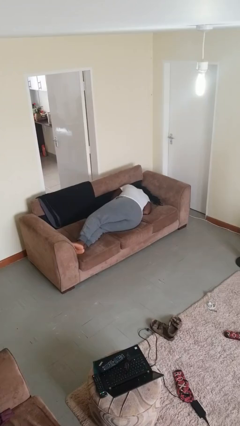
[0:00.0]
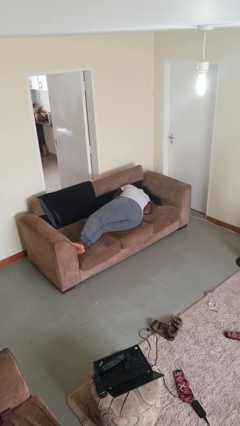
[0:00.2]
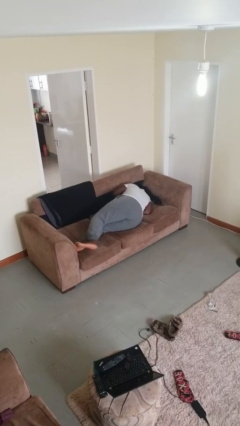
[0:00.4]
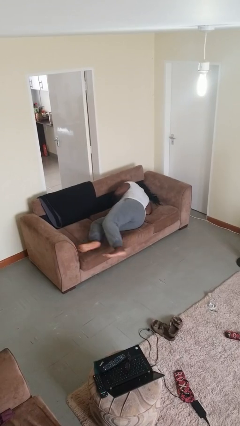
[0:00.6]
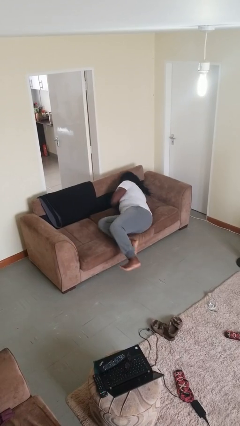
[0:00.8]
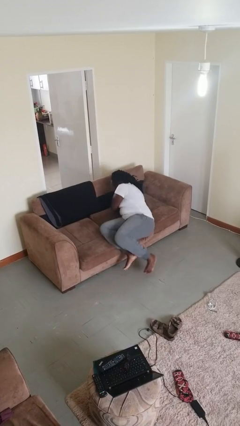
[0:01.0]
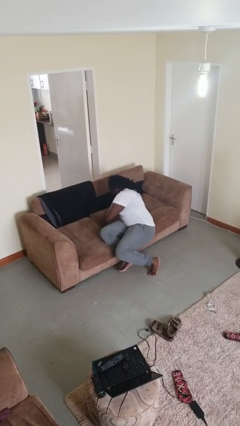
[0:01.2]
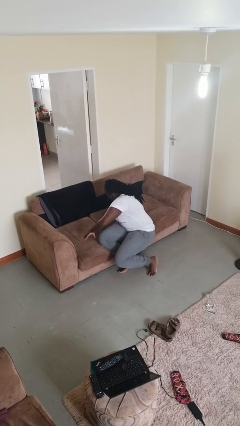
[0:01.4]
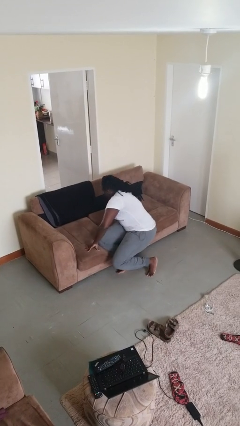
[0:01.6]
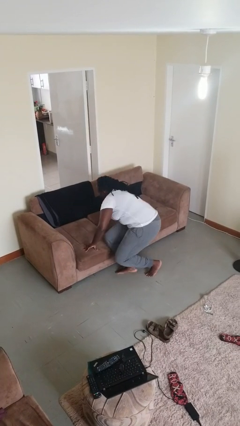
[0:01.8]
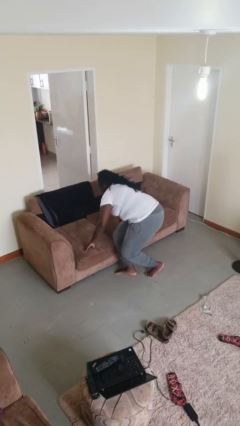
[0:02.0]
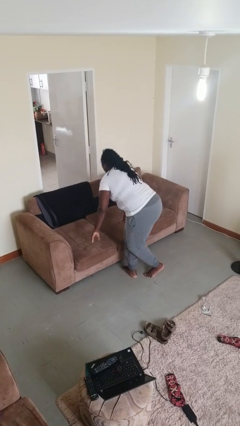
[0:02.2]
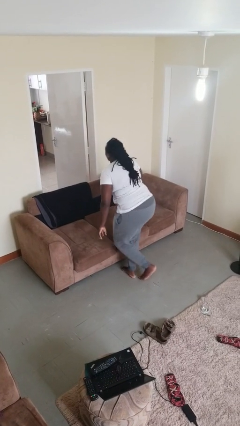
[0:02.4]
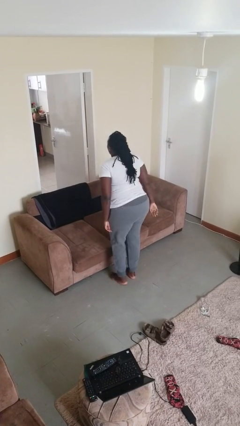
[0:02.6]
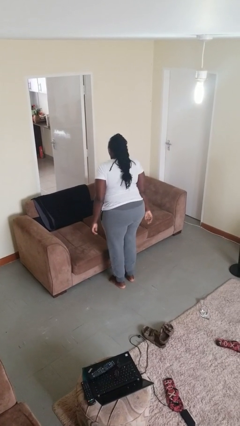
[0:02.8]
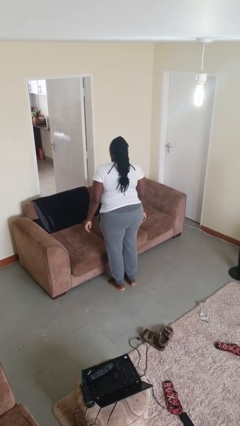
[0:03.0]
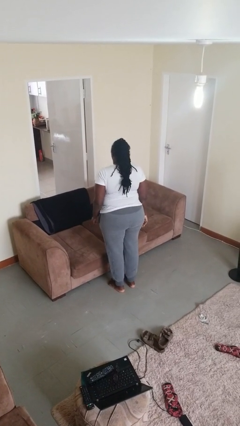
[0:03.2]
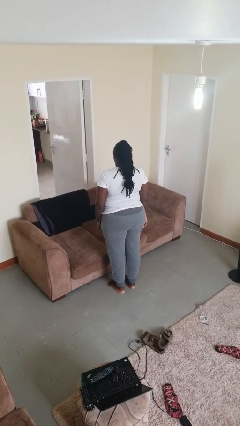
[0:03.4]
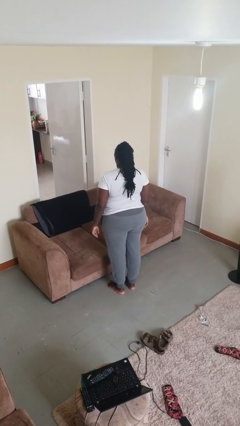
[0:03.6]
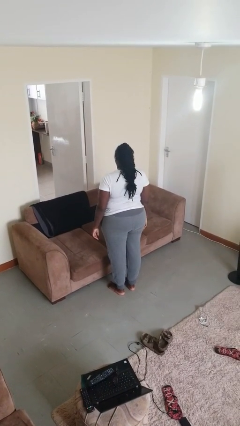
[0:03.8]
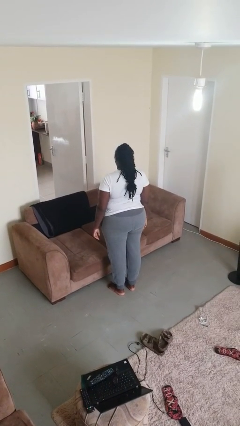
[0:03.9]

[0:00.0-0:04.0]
person stands up

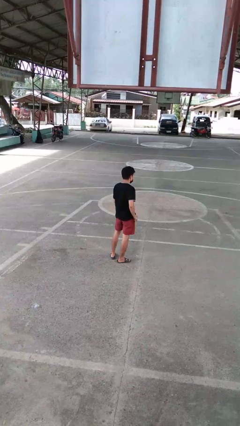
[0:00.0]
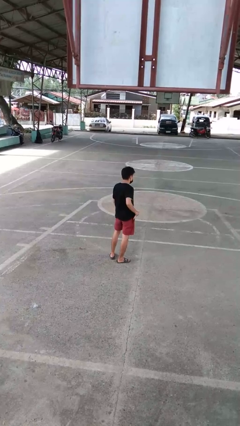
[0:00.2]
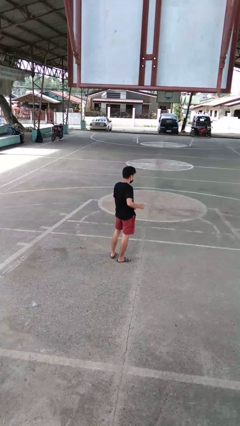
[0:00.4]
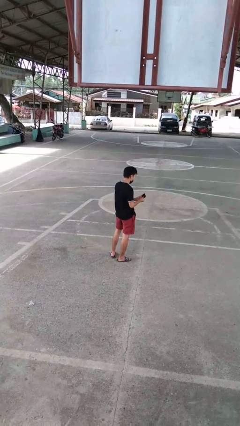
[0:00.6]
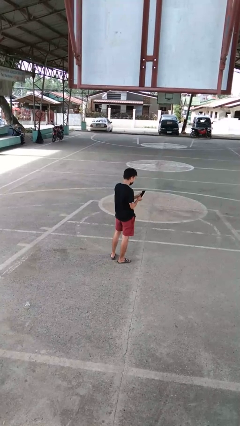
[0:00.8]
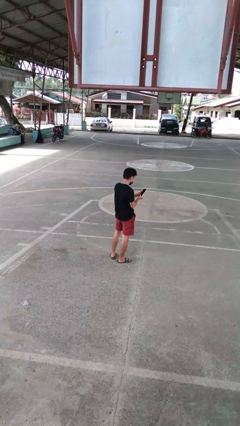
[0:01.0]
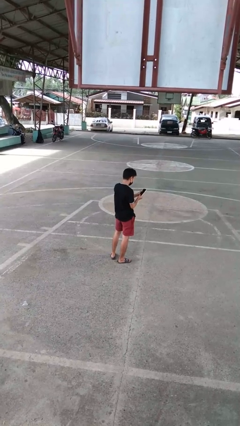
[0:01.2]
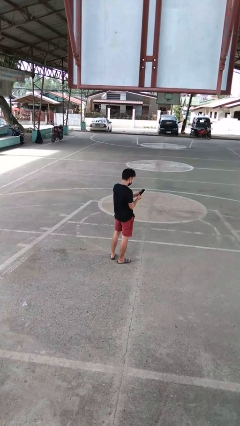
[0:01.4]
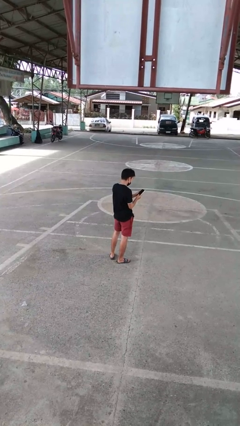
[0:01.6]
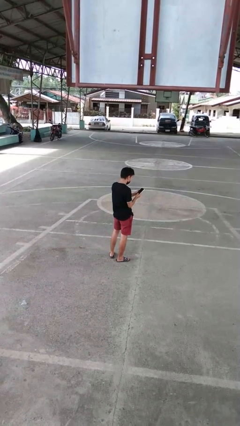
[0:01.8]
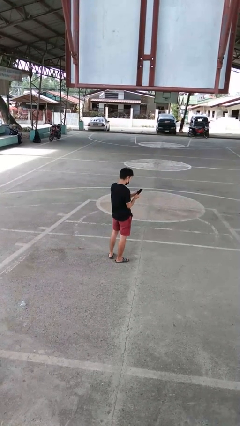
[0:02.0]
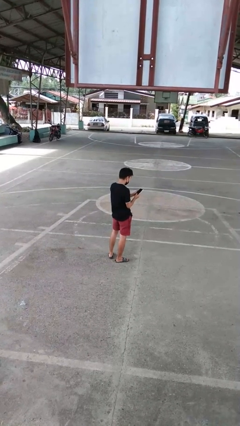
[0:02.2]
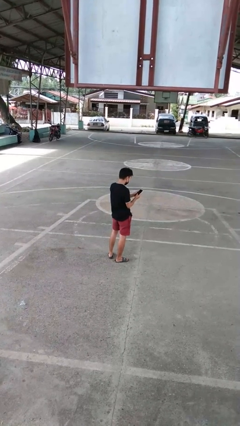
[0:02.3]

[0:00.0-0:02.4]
person takes phone from pocket

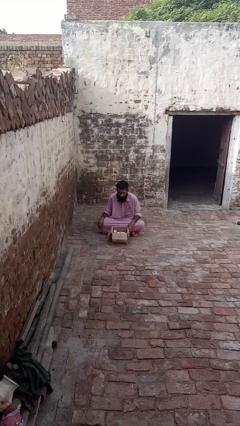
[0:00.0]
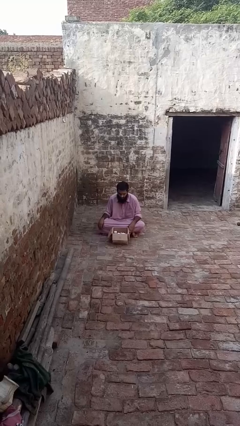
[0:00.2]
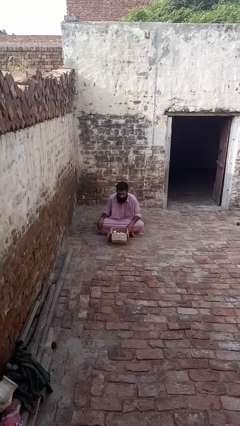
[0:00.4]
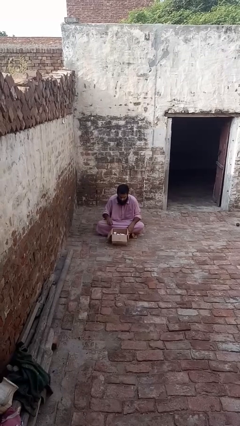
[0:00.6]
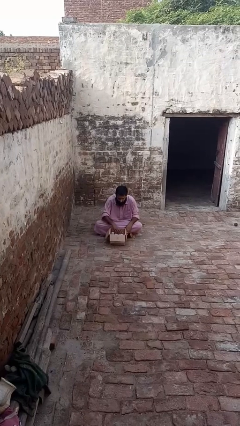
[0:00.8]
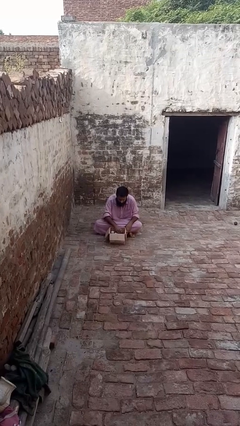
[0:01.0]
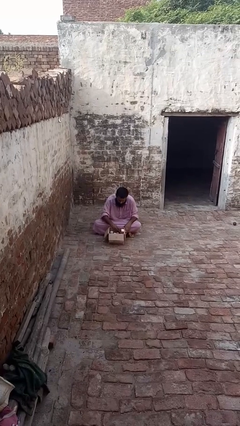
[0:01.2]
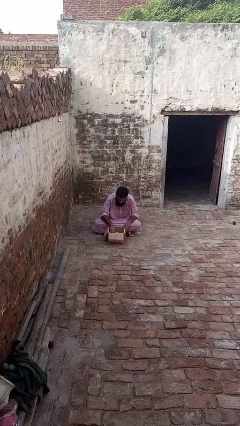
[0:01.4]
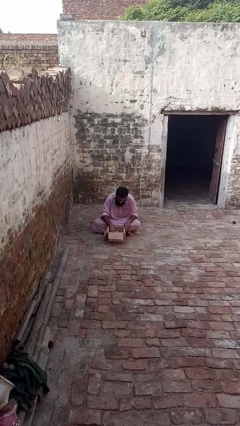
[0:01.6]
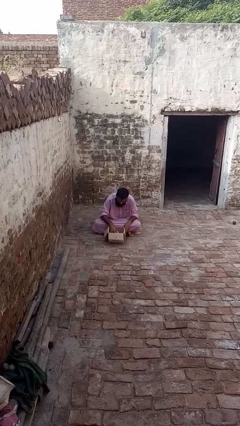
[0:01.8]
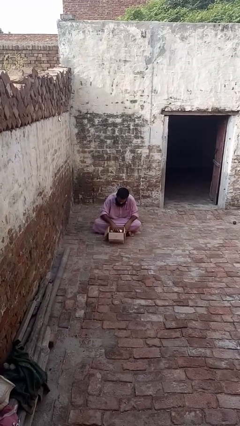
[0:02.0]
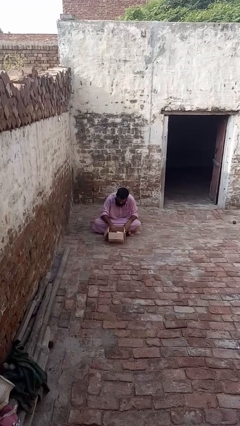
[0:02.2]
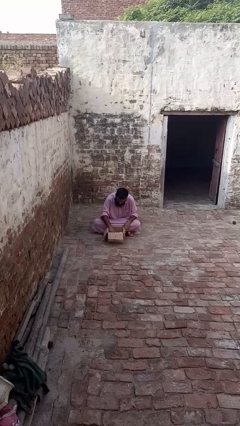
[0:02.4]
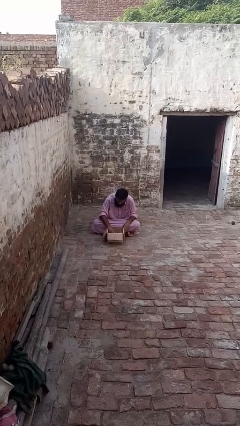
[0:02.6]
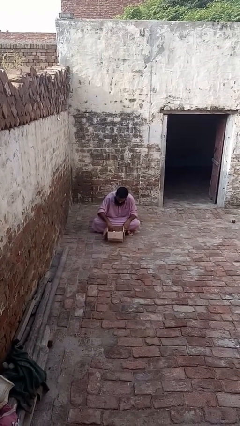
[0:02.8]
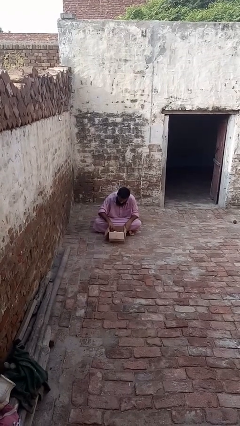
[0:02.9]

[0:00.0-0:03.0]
person searches in box

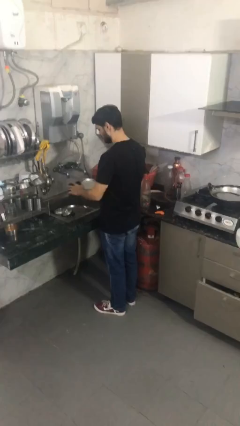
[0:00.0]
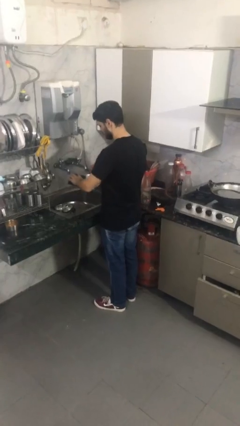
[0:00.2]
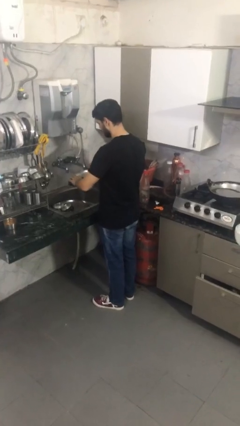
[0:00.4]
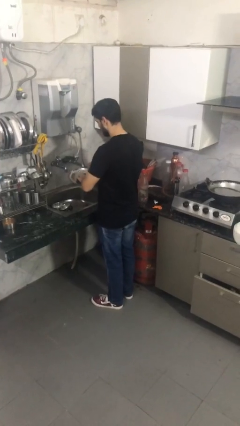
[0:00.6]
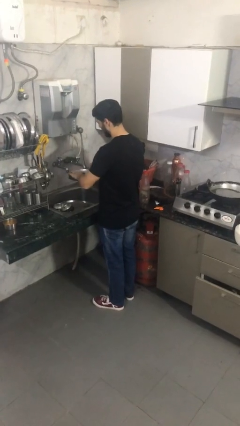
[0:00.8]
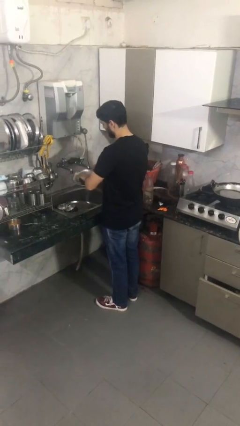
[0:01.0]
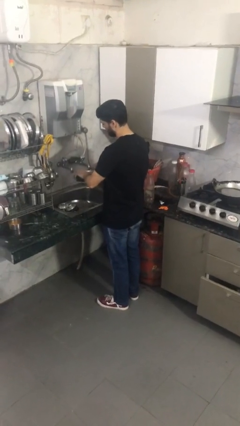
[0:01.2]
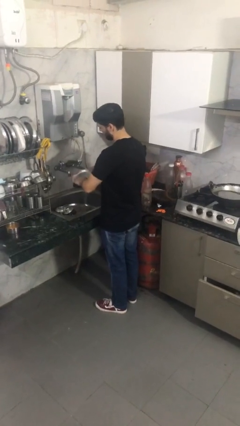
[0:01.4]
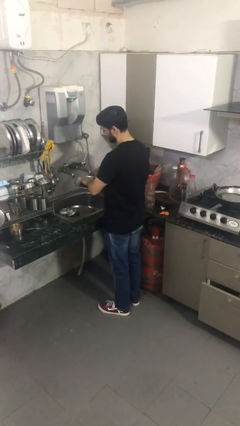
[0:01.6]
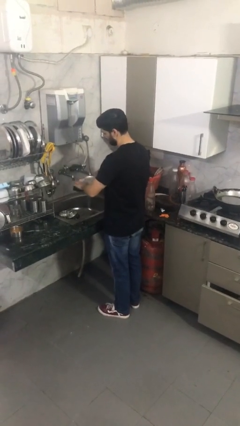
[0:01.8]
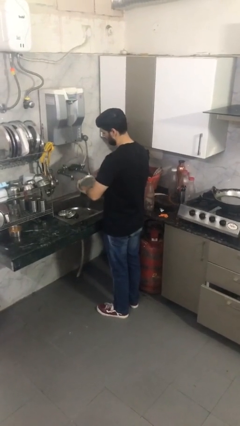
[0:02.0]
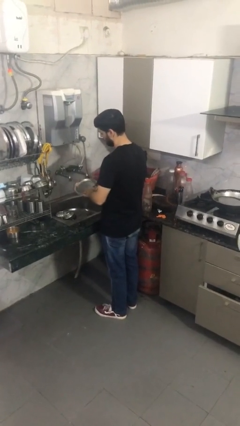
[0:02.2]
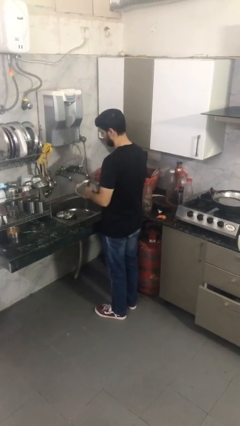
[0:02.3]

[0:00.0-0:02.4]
person washes dish

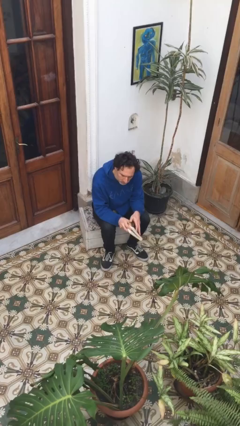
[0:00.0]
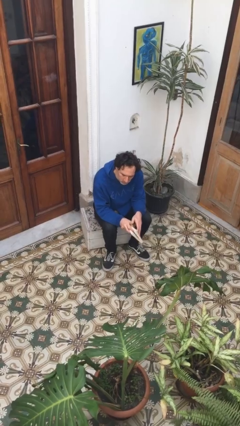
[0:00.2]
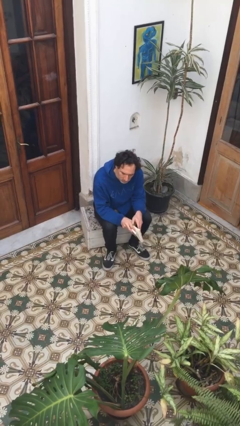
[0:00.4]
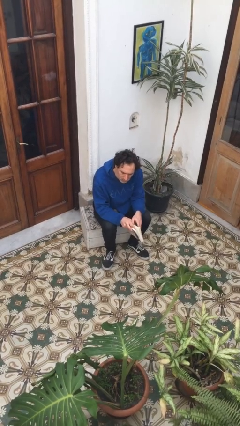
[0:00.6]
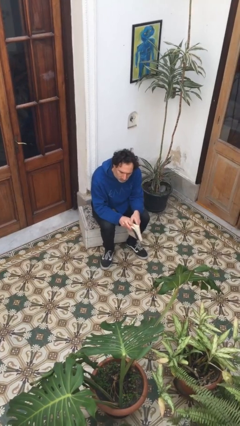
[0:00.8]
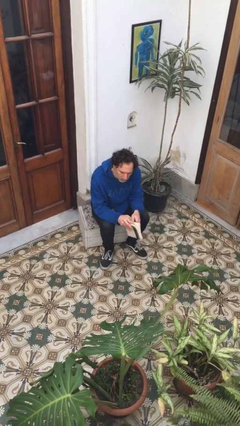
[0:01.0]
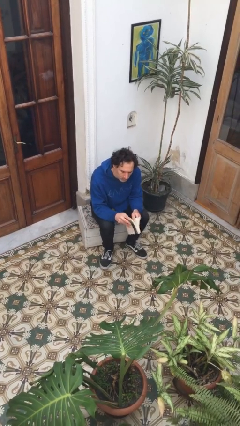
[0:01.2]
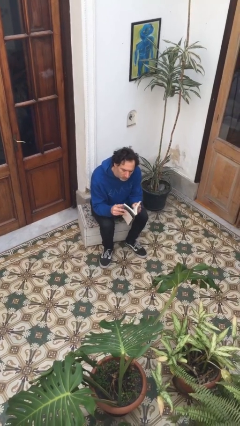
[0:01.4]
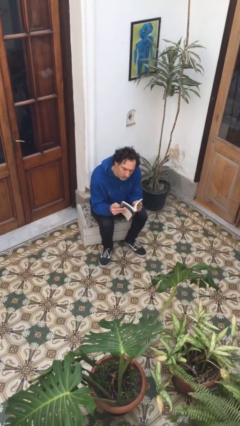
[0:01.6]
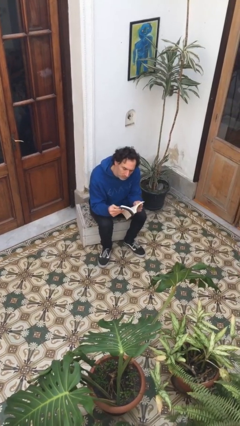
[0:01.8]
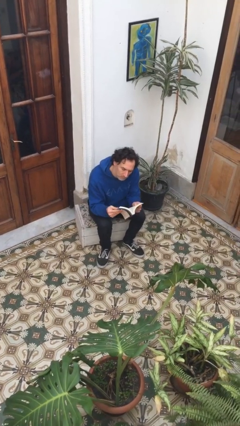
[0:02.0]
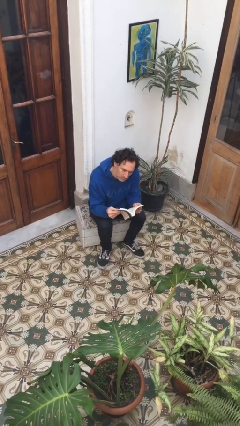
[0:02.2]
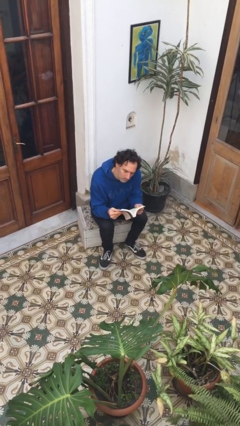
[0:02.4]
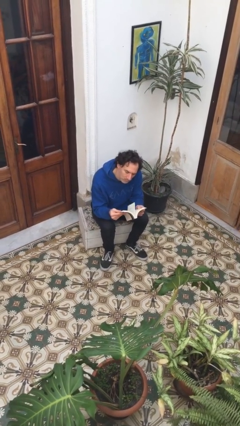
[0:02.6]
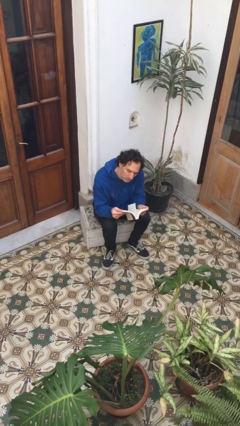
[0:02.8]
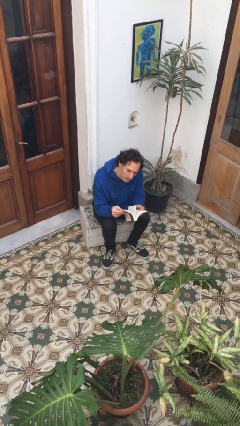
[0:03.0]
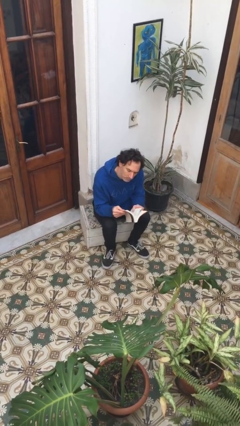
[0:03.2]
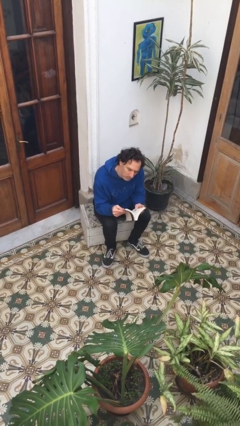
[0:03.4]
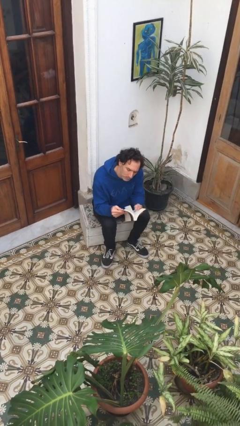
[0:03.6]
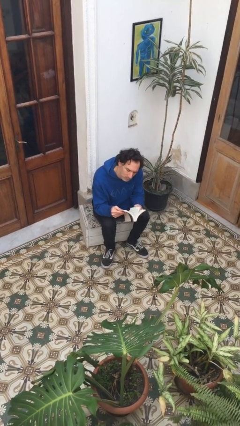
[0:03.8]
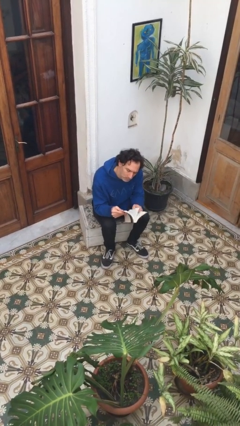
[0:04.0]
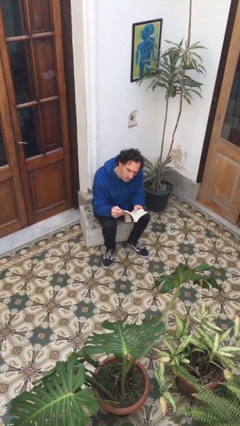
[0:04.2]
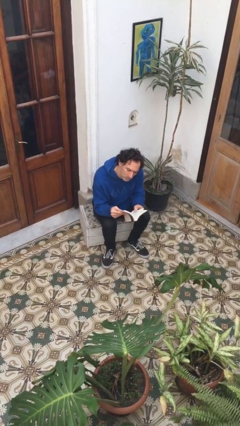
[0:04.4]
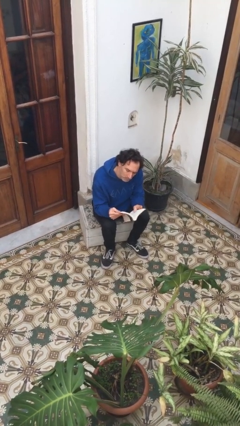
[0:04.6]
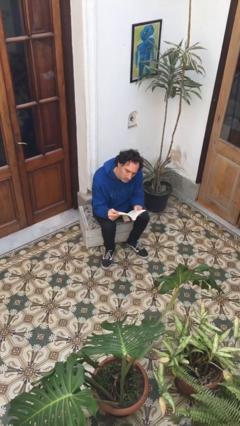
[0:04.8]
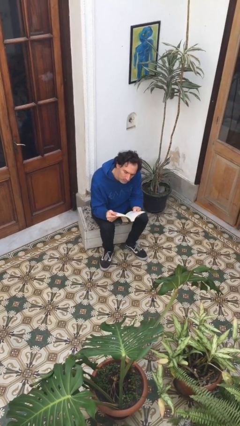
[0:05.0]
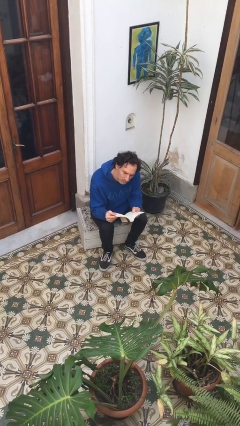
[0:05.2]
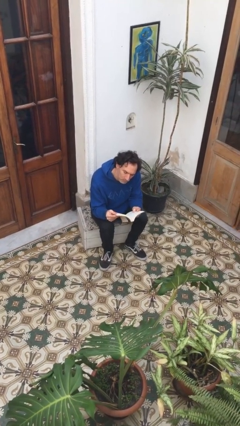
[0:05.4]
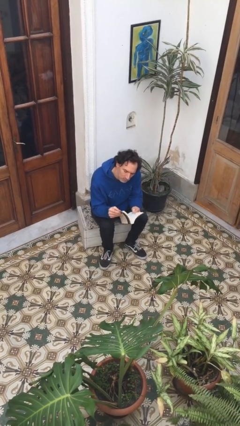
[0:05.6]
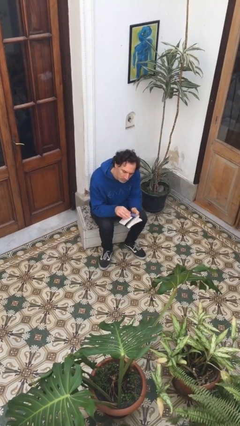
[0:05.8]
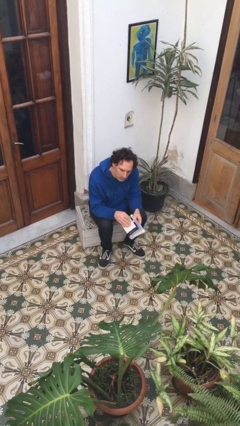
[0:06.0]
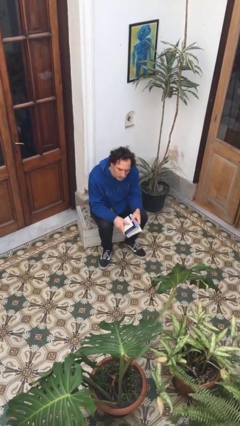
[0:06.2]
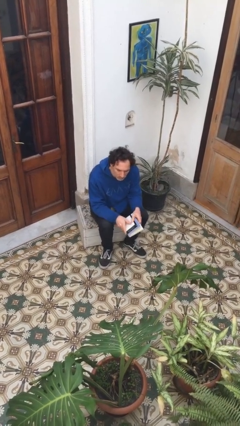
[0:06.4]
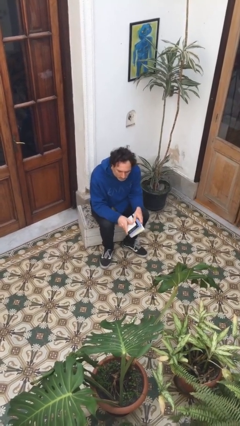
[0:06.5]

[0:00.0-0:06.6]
person reads book
